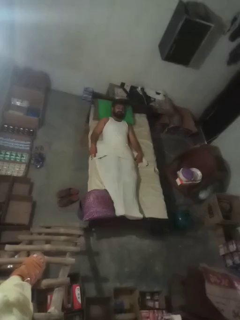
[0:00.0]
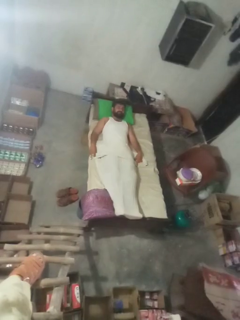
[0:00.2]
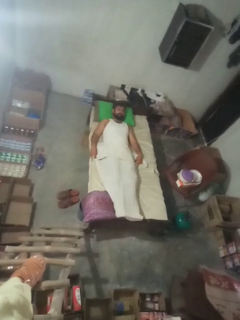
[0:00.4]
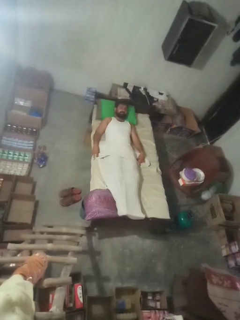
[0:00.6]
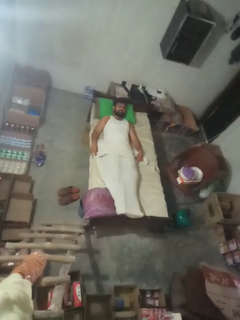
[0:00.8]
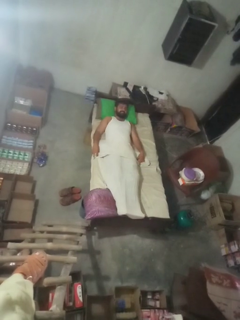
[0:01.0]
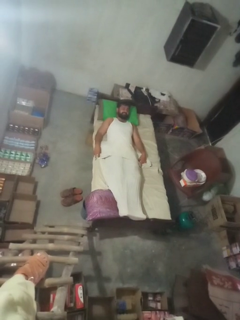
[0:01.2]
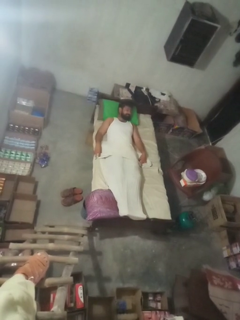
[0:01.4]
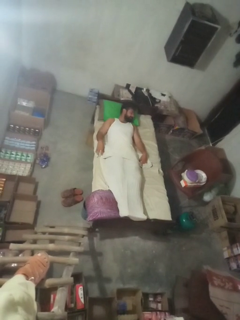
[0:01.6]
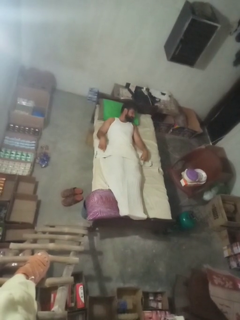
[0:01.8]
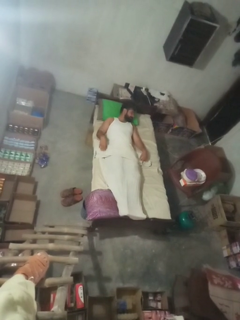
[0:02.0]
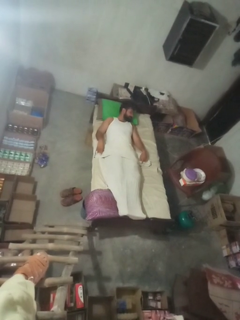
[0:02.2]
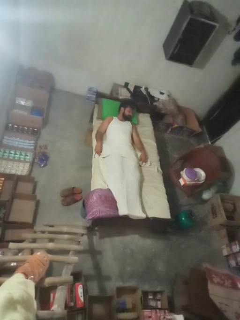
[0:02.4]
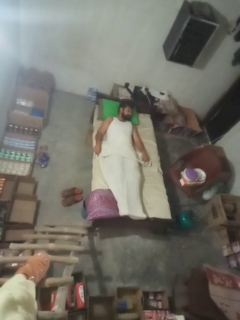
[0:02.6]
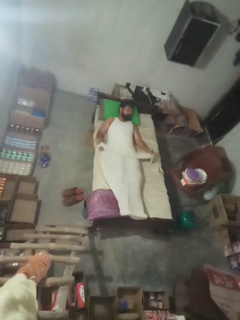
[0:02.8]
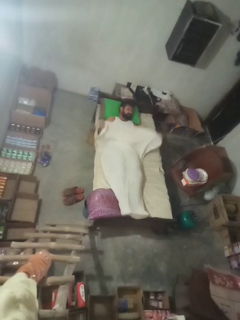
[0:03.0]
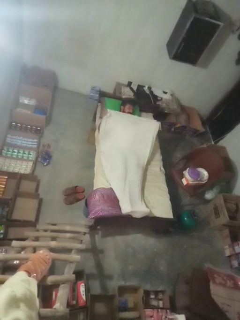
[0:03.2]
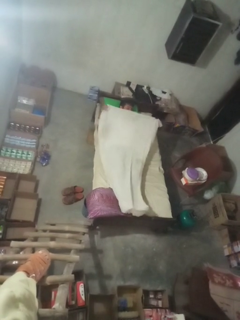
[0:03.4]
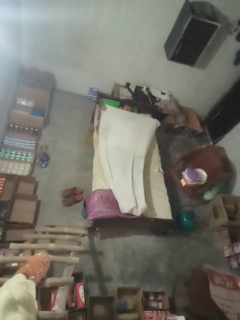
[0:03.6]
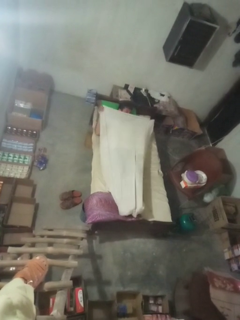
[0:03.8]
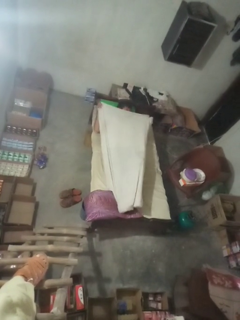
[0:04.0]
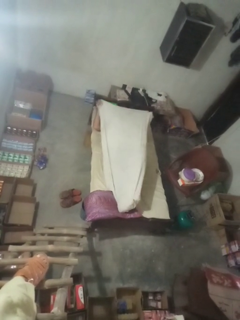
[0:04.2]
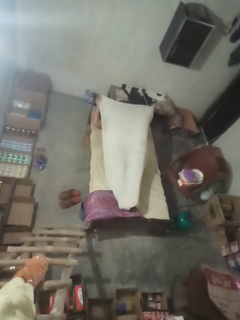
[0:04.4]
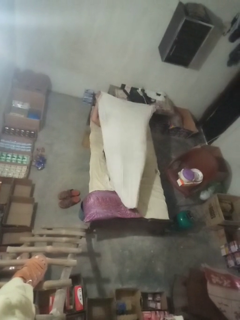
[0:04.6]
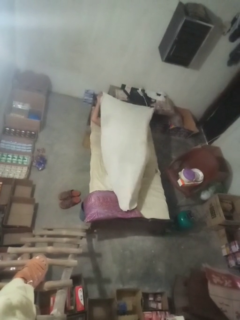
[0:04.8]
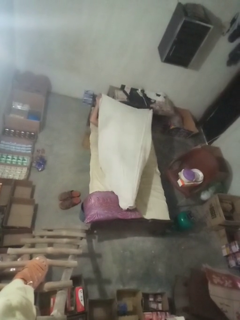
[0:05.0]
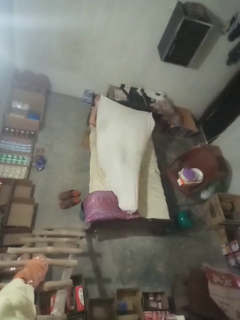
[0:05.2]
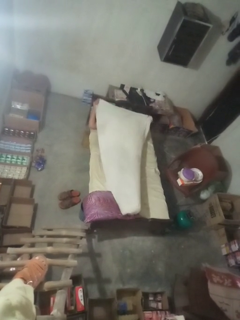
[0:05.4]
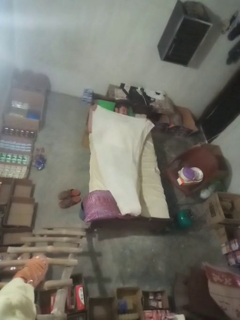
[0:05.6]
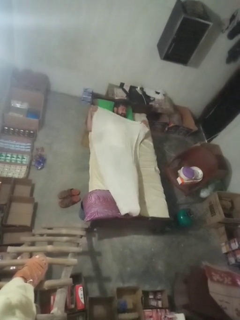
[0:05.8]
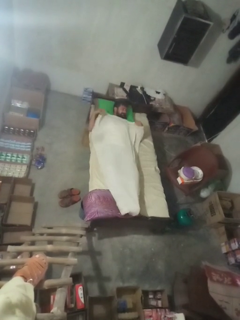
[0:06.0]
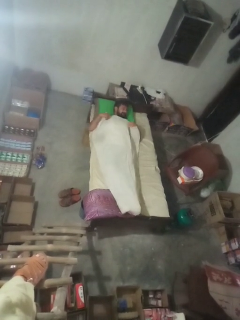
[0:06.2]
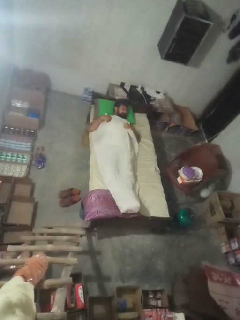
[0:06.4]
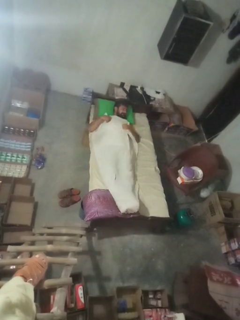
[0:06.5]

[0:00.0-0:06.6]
person covers with bedsheets

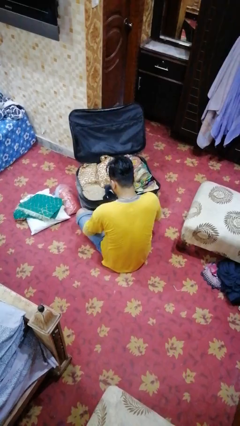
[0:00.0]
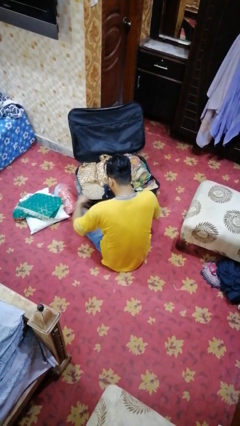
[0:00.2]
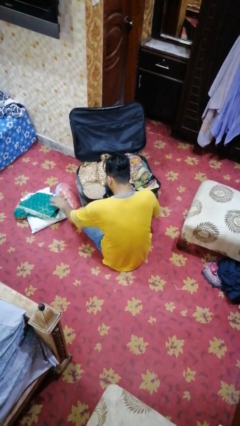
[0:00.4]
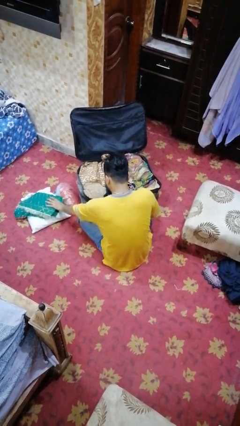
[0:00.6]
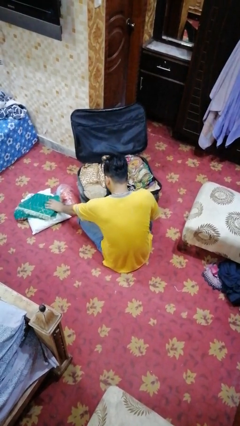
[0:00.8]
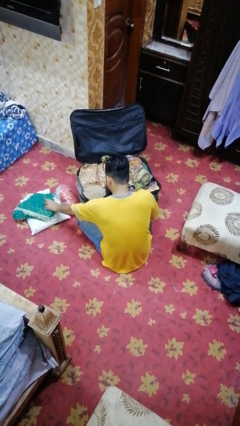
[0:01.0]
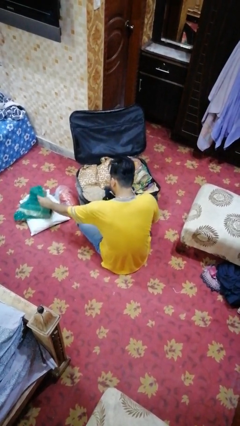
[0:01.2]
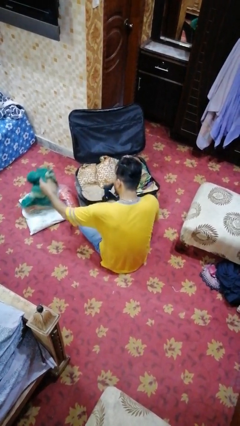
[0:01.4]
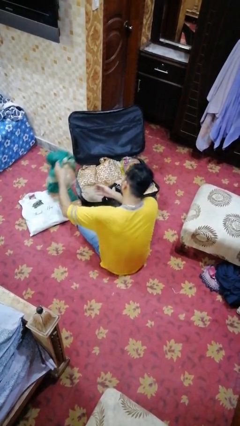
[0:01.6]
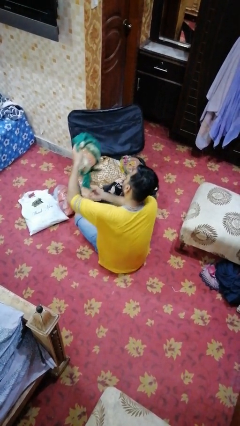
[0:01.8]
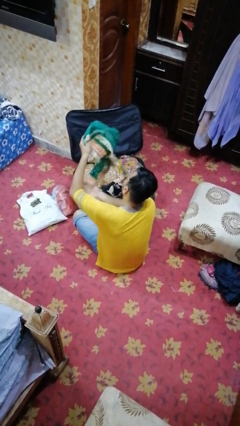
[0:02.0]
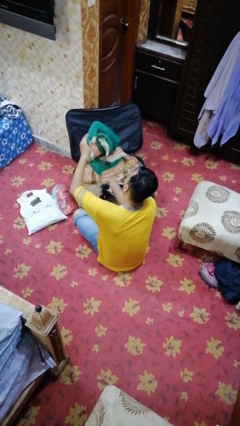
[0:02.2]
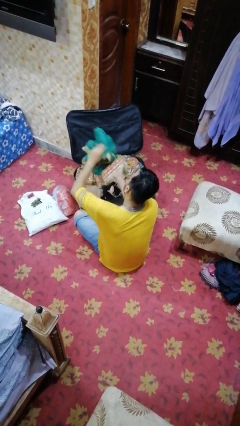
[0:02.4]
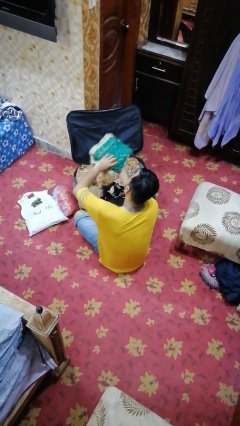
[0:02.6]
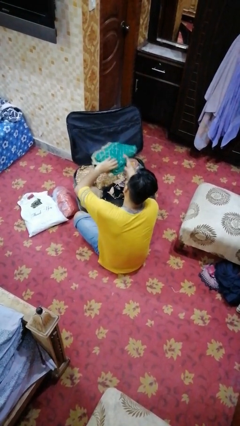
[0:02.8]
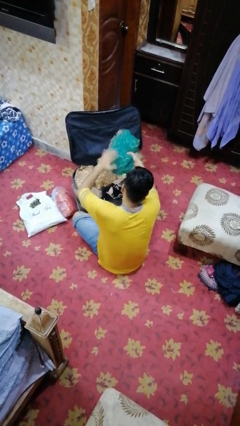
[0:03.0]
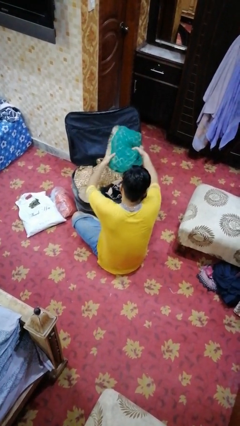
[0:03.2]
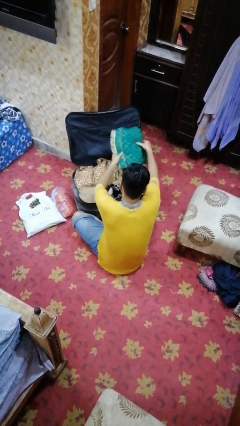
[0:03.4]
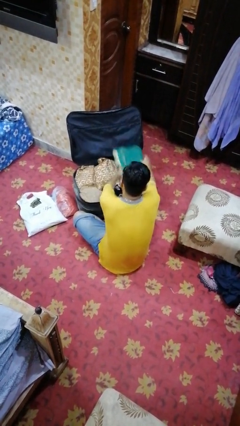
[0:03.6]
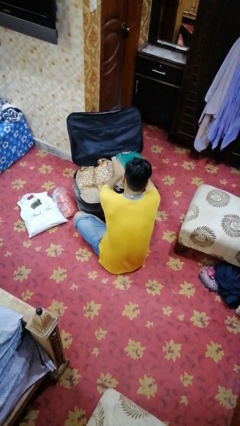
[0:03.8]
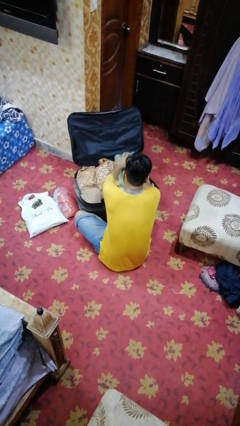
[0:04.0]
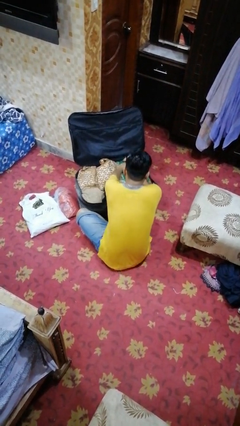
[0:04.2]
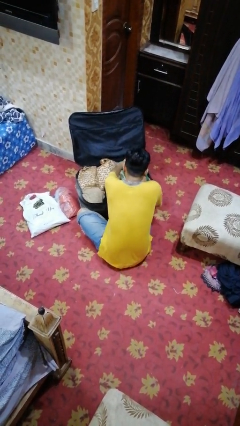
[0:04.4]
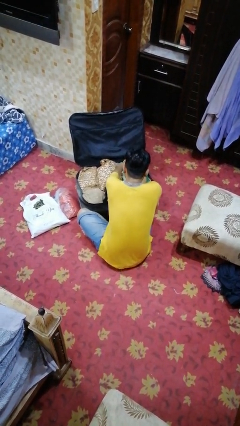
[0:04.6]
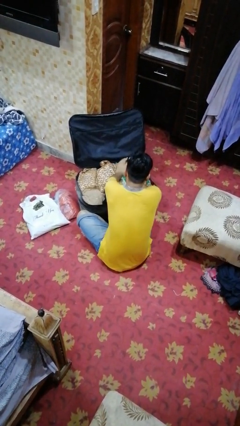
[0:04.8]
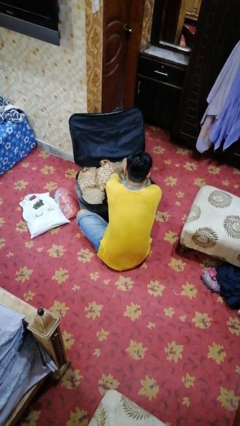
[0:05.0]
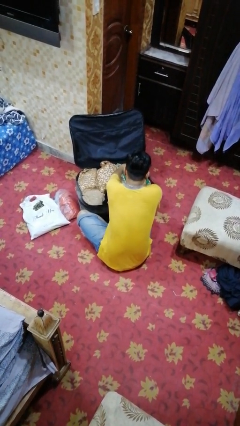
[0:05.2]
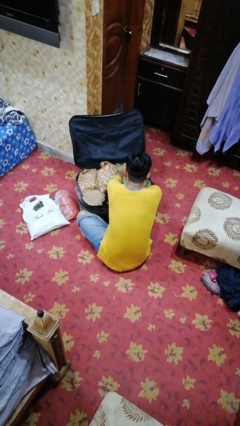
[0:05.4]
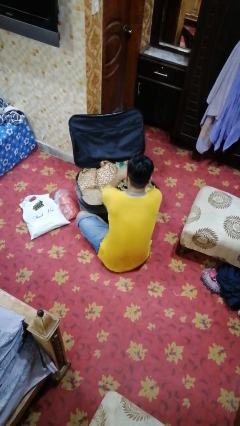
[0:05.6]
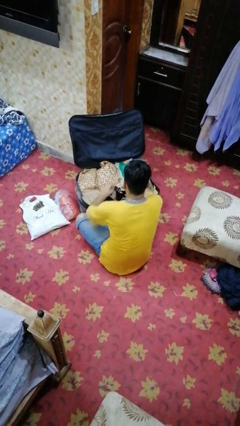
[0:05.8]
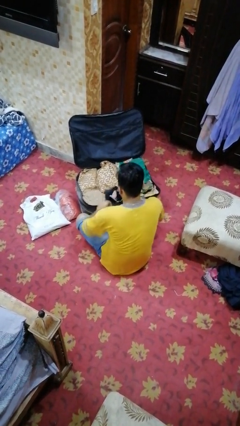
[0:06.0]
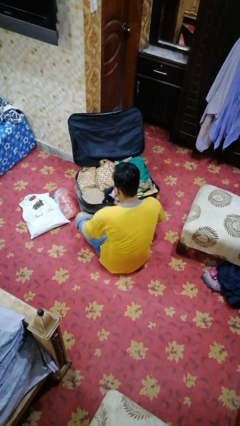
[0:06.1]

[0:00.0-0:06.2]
person loads clothes into suitcase

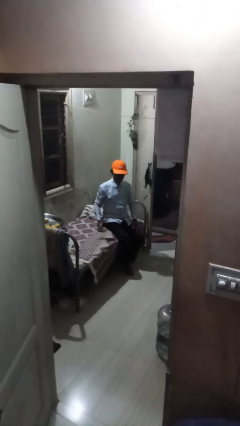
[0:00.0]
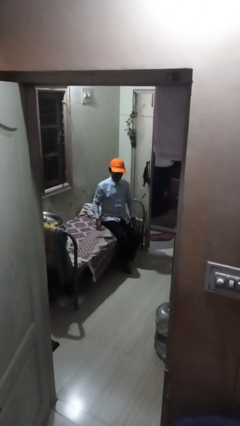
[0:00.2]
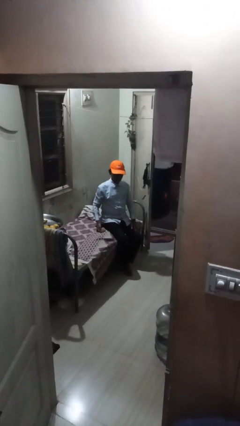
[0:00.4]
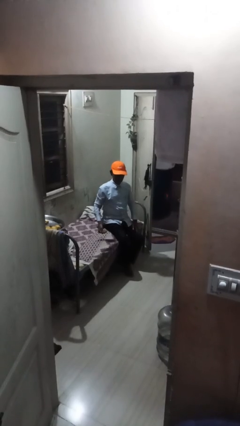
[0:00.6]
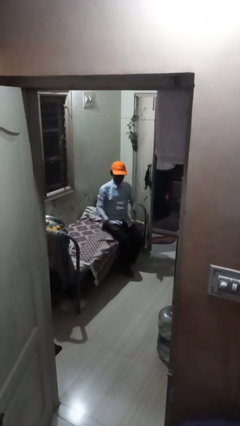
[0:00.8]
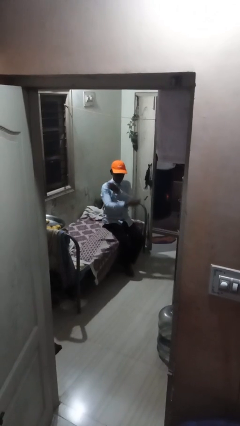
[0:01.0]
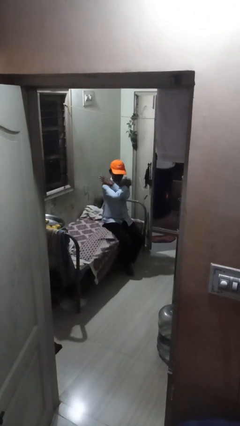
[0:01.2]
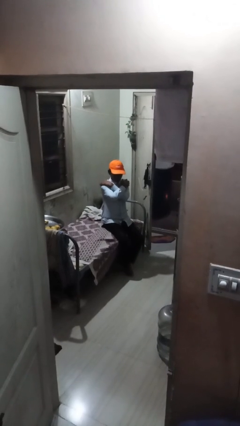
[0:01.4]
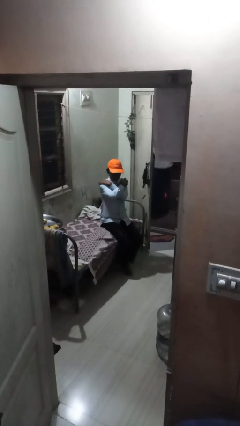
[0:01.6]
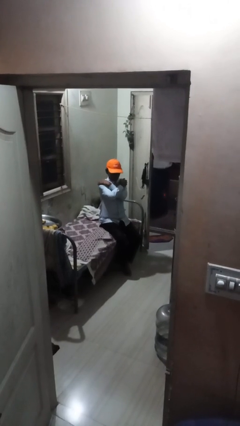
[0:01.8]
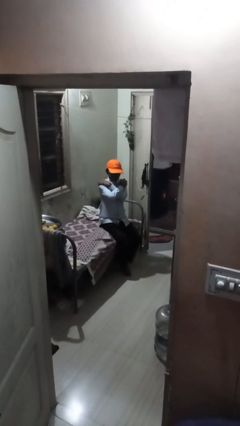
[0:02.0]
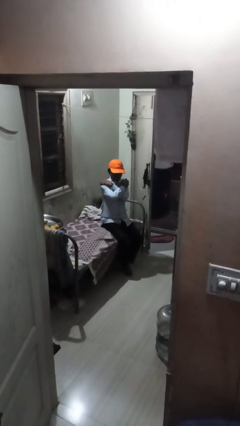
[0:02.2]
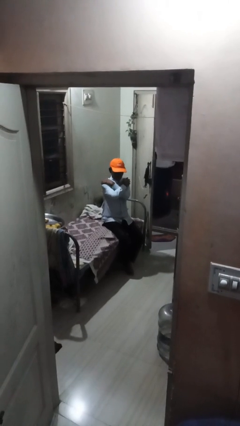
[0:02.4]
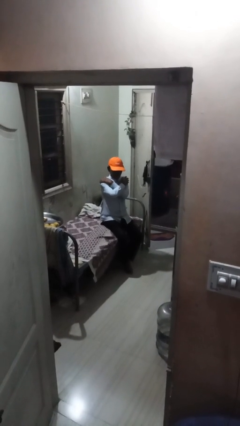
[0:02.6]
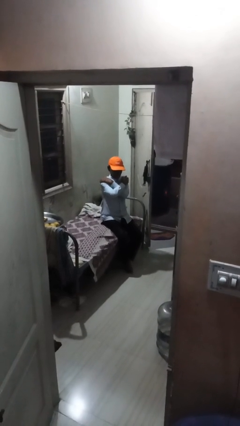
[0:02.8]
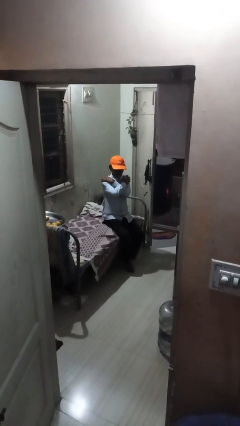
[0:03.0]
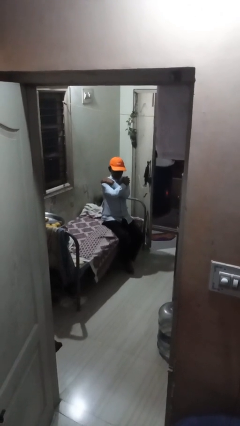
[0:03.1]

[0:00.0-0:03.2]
person gestures arms x

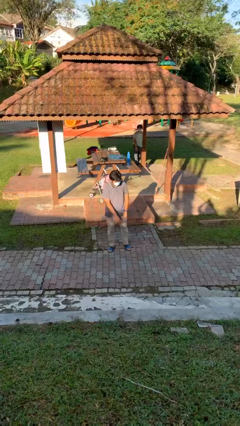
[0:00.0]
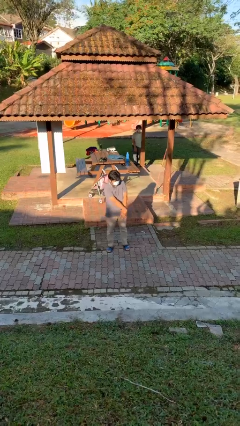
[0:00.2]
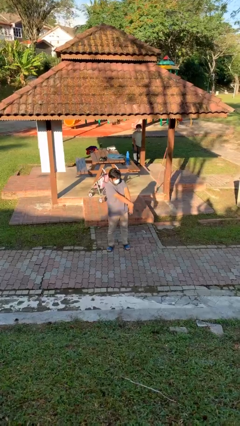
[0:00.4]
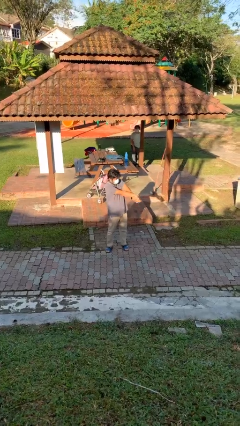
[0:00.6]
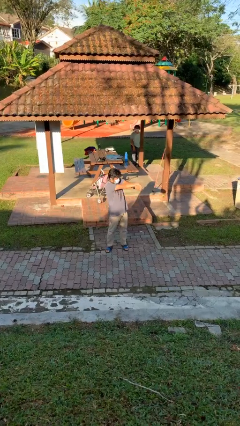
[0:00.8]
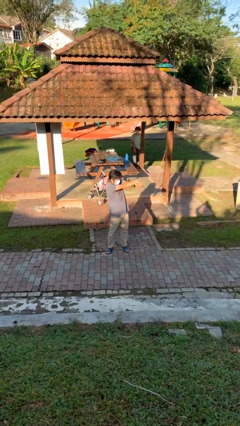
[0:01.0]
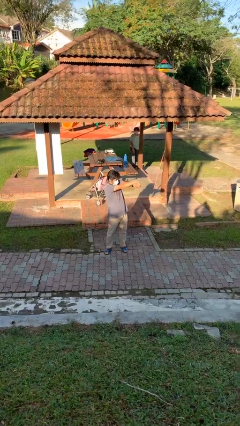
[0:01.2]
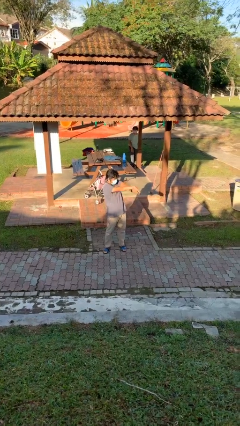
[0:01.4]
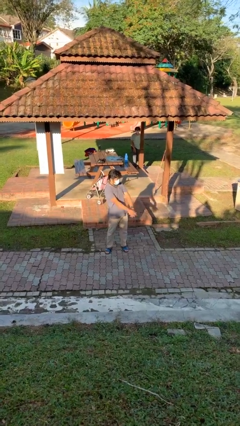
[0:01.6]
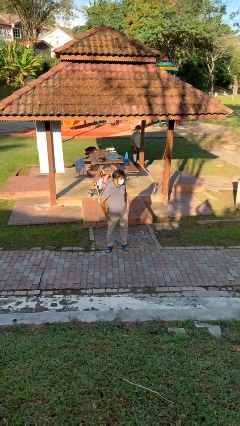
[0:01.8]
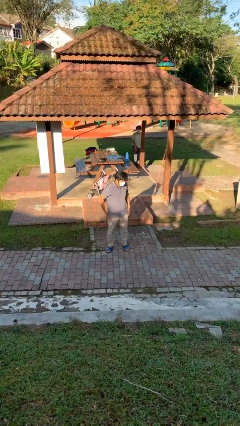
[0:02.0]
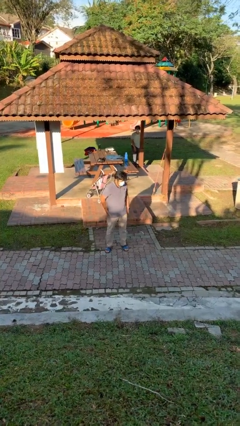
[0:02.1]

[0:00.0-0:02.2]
person crosses arms

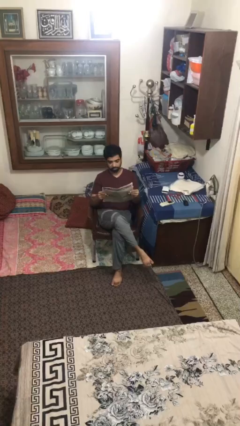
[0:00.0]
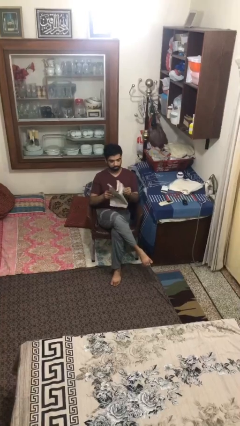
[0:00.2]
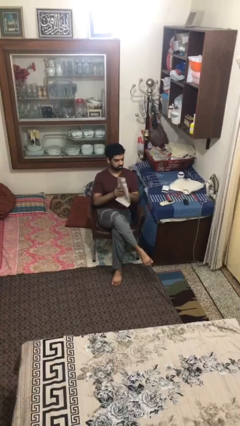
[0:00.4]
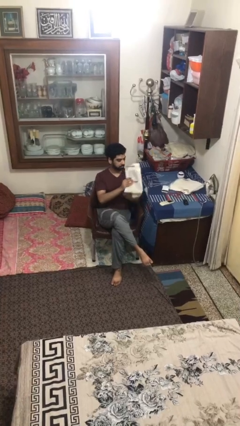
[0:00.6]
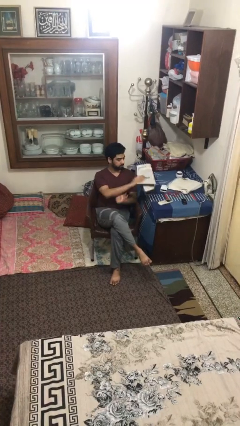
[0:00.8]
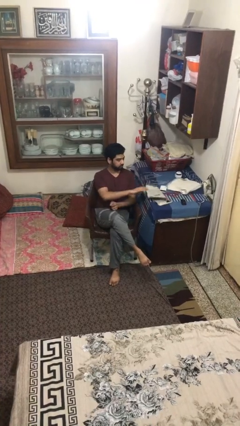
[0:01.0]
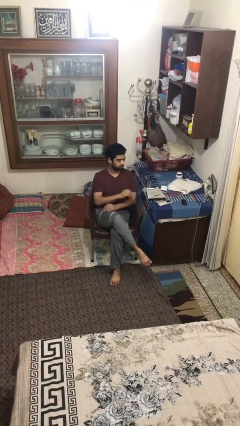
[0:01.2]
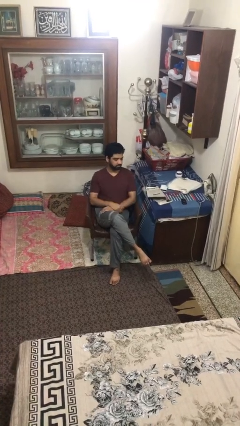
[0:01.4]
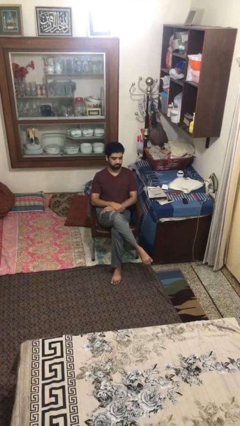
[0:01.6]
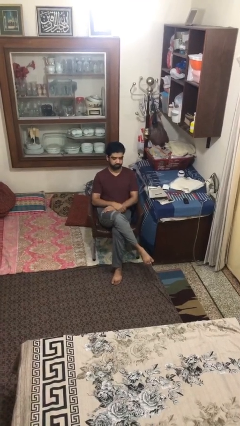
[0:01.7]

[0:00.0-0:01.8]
person puts down object on table
